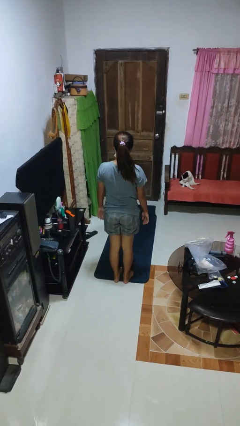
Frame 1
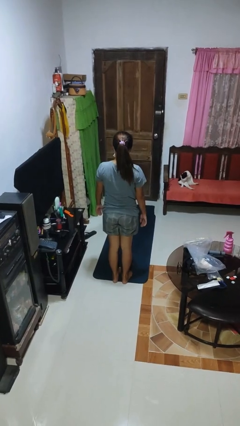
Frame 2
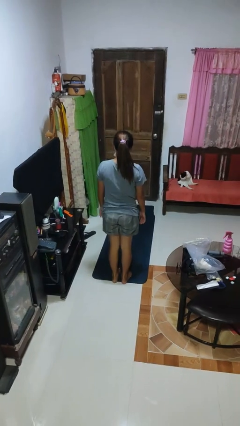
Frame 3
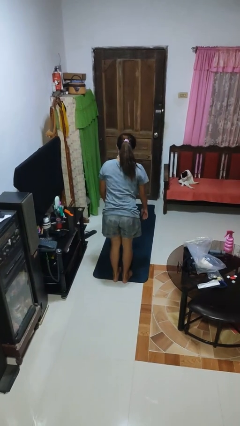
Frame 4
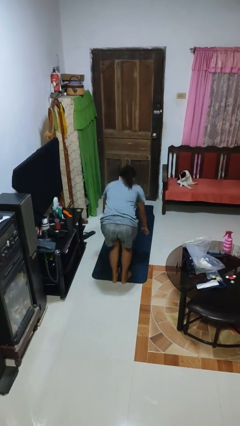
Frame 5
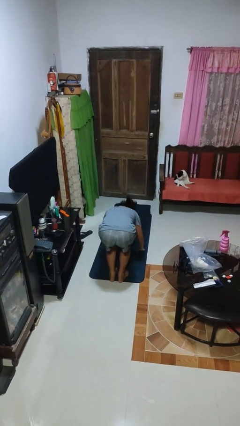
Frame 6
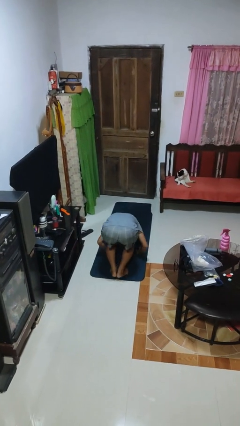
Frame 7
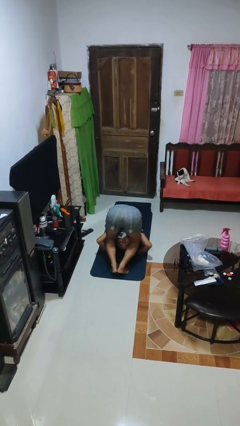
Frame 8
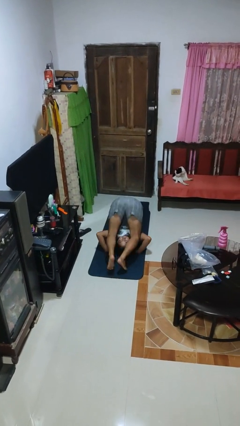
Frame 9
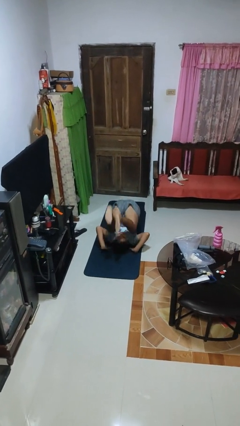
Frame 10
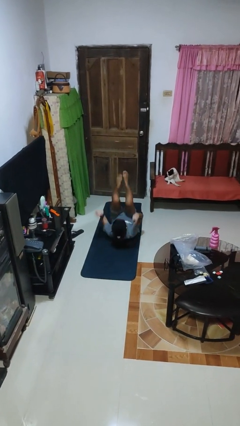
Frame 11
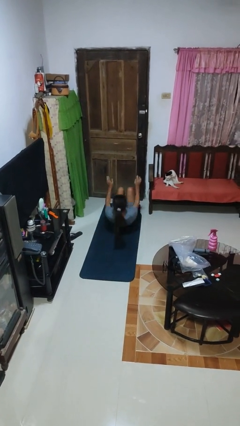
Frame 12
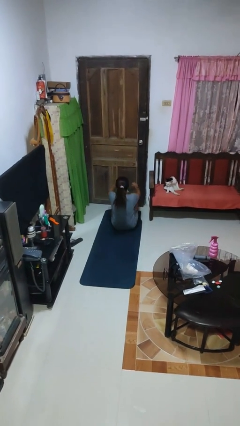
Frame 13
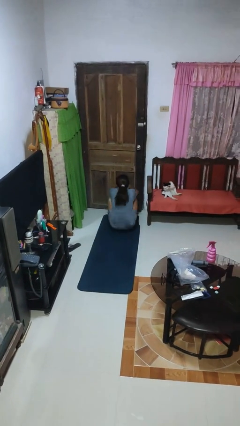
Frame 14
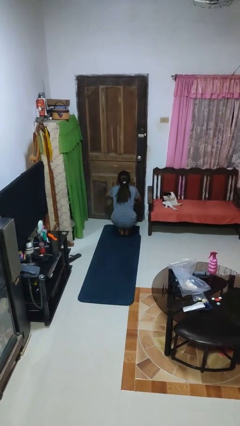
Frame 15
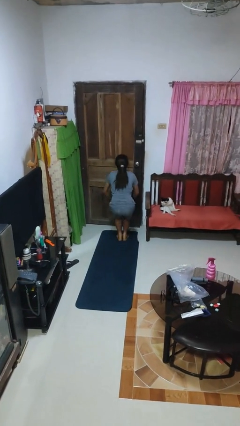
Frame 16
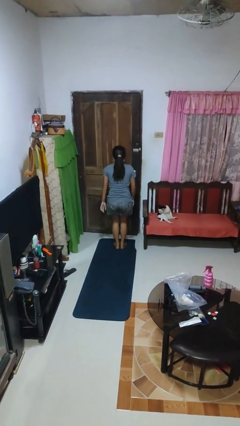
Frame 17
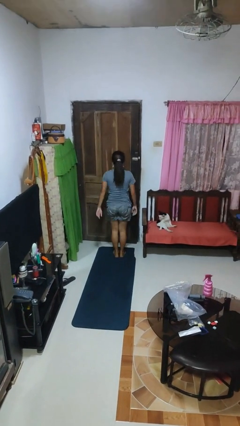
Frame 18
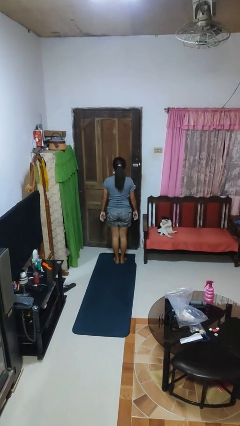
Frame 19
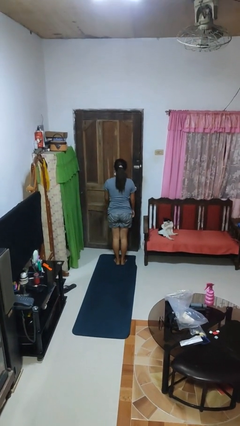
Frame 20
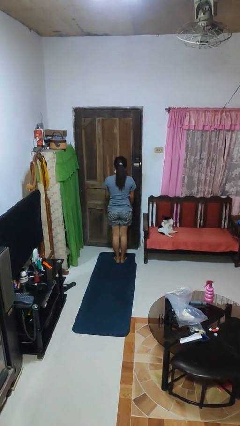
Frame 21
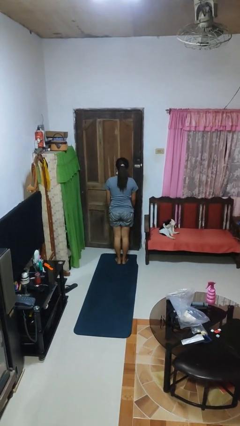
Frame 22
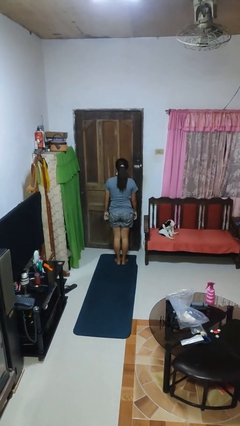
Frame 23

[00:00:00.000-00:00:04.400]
person somersaults

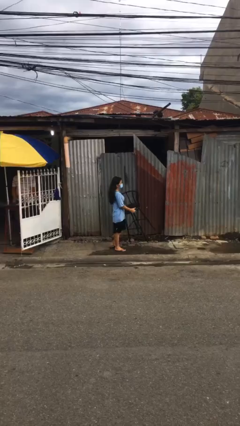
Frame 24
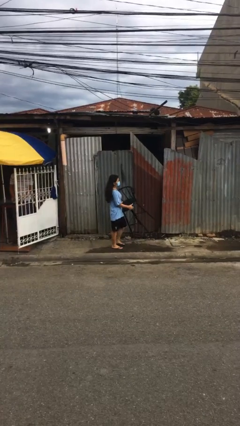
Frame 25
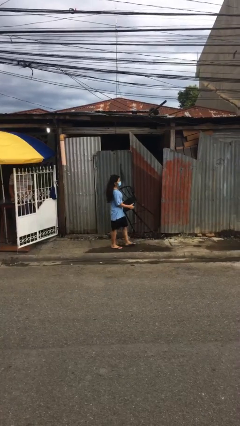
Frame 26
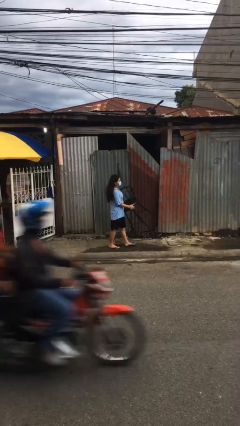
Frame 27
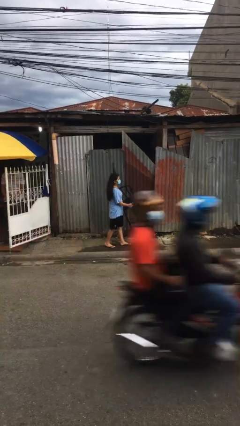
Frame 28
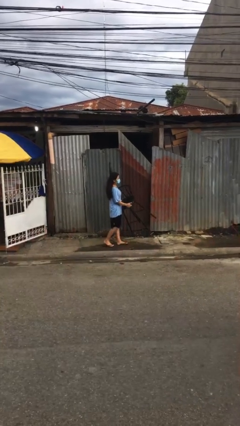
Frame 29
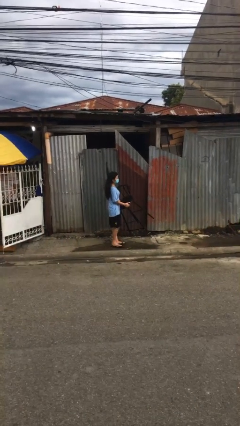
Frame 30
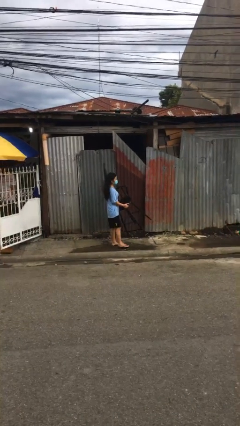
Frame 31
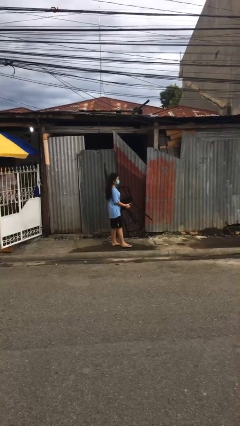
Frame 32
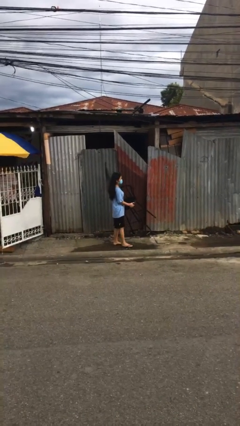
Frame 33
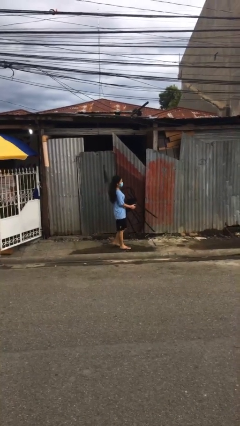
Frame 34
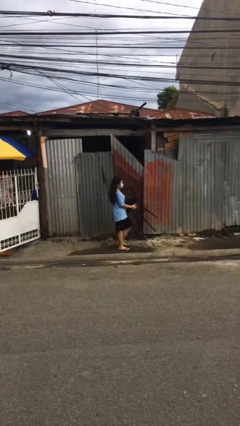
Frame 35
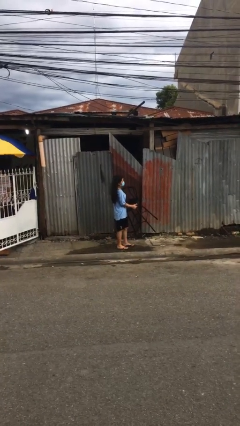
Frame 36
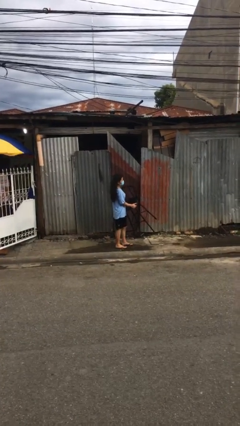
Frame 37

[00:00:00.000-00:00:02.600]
person carries heavy object

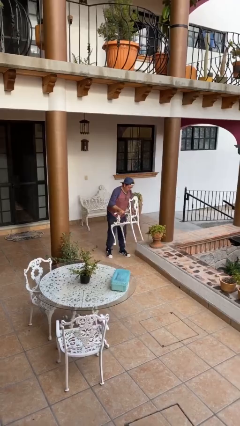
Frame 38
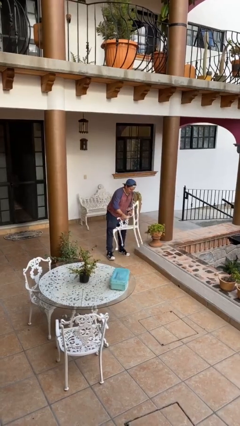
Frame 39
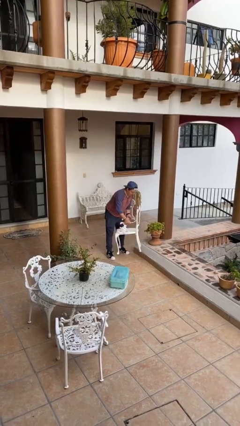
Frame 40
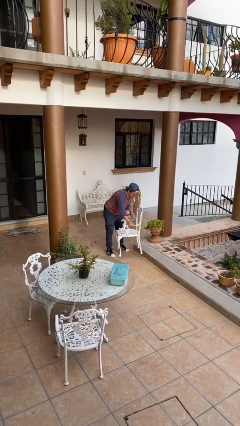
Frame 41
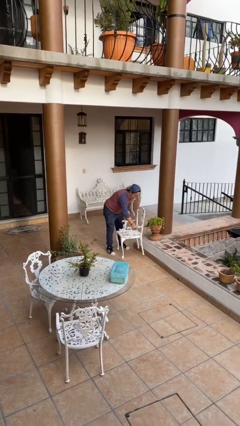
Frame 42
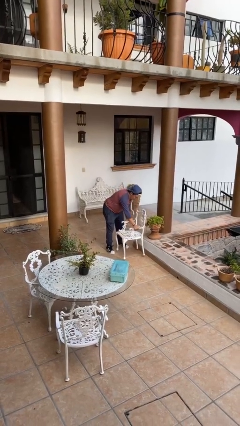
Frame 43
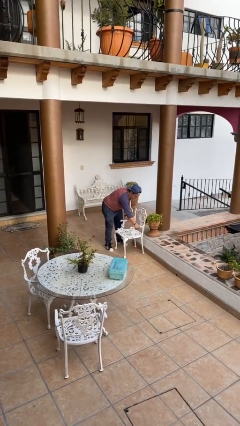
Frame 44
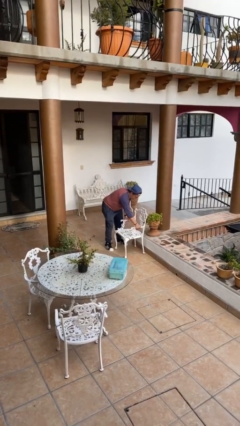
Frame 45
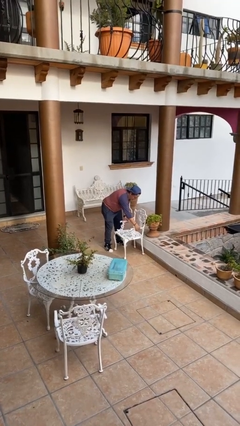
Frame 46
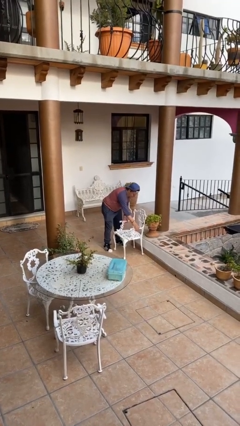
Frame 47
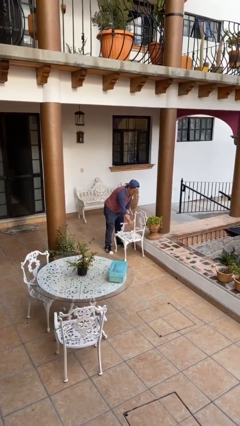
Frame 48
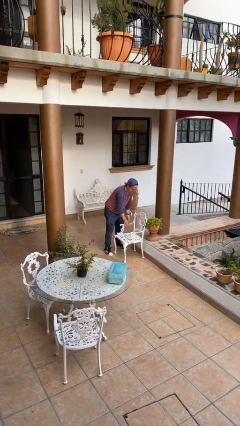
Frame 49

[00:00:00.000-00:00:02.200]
person puts down object on floor

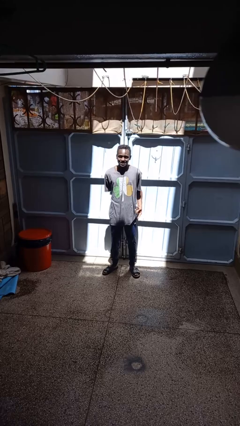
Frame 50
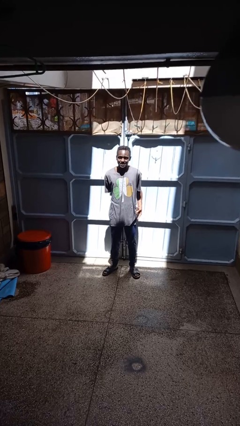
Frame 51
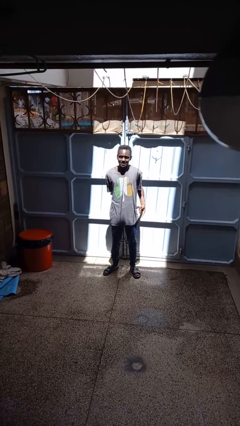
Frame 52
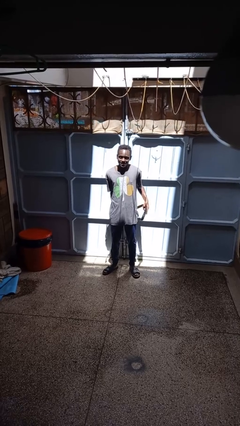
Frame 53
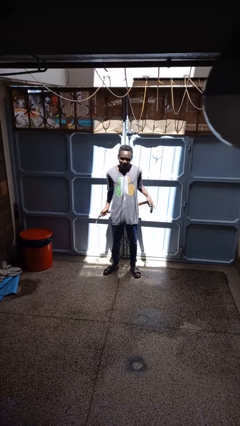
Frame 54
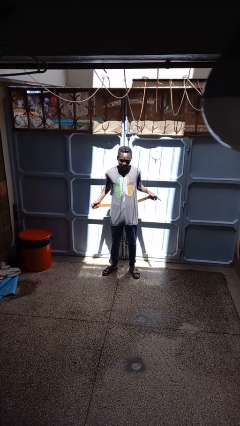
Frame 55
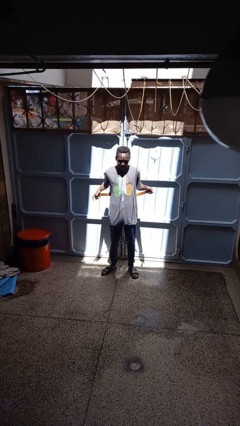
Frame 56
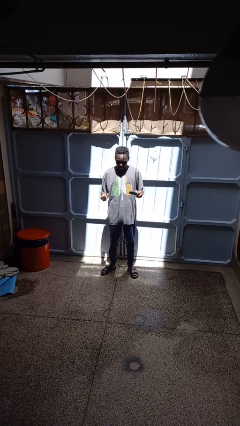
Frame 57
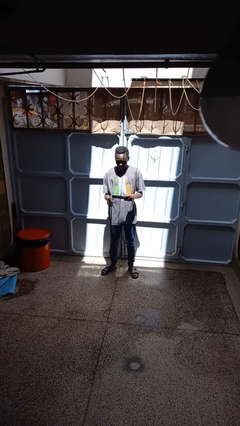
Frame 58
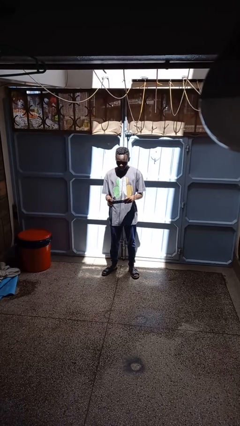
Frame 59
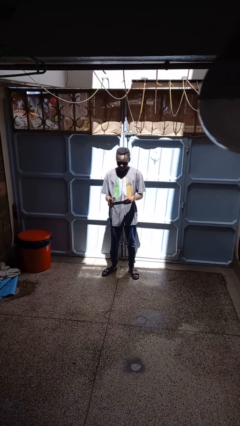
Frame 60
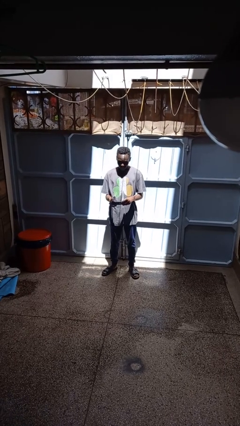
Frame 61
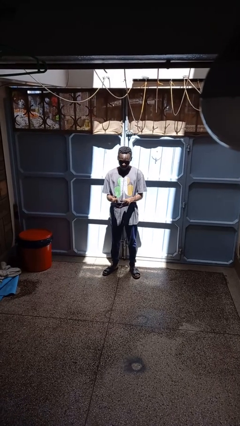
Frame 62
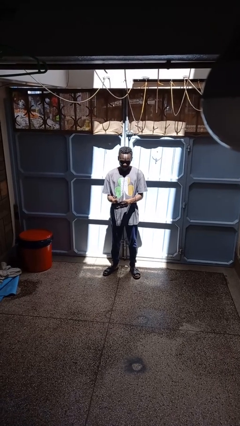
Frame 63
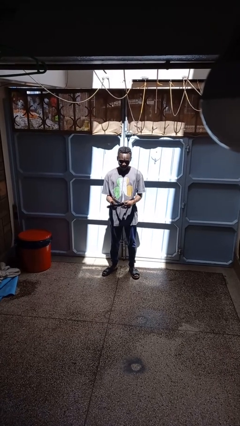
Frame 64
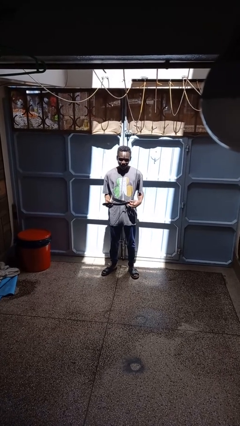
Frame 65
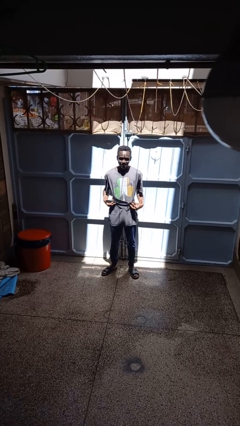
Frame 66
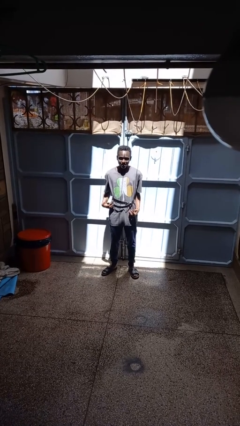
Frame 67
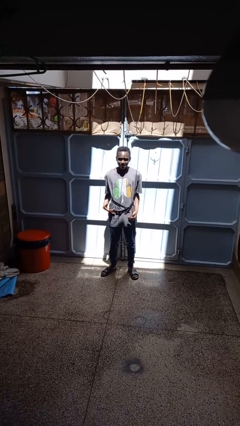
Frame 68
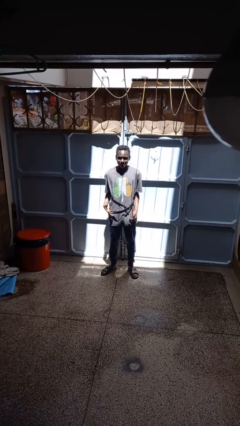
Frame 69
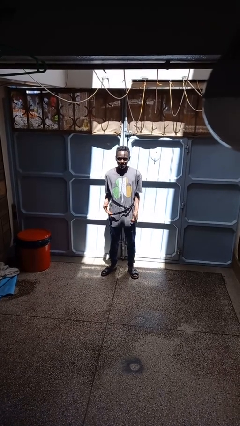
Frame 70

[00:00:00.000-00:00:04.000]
person puts on belt

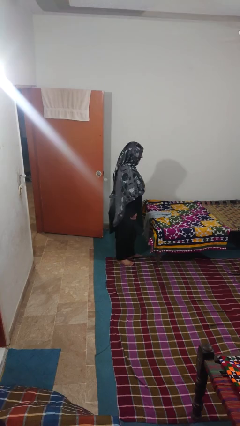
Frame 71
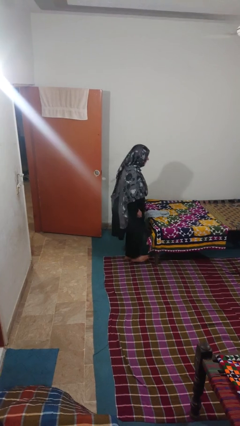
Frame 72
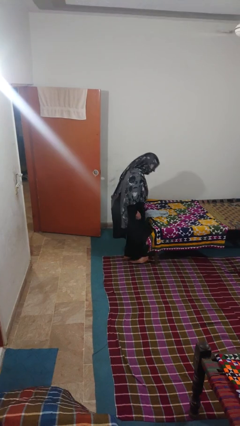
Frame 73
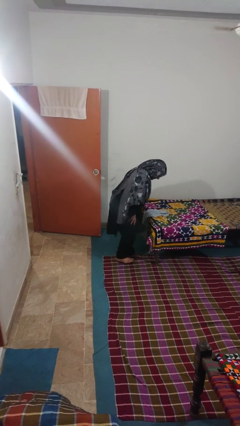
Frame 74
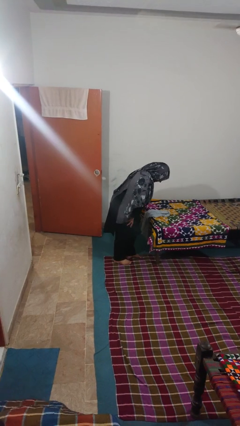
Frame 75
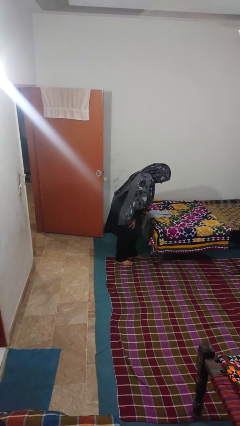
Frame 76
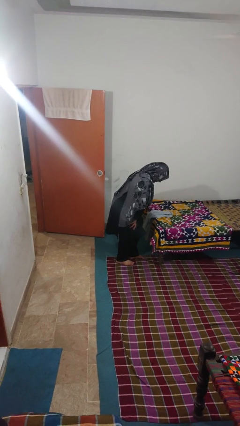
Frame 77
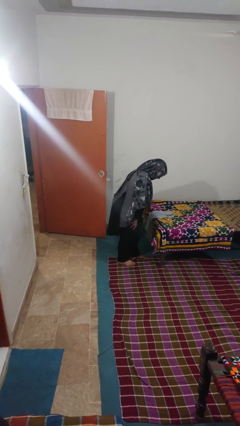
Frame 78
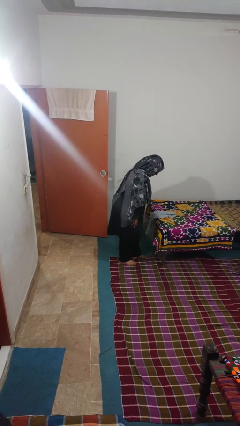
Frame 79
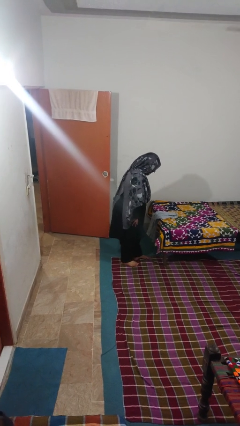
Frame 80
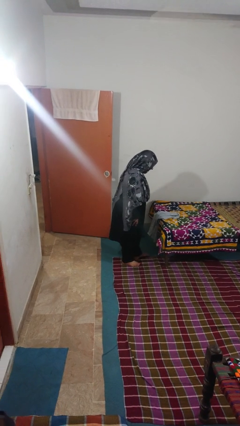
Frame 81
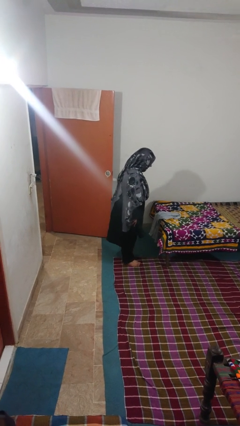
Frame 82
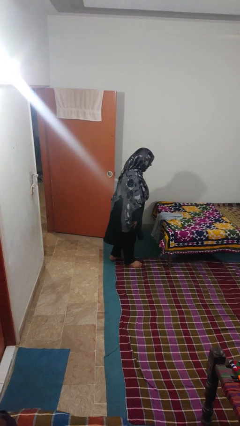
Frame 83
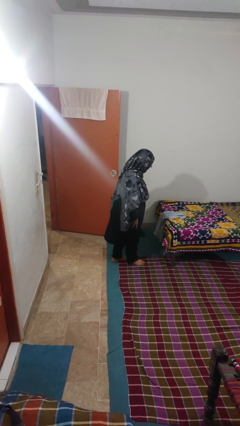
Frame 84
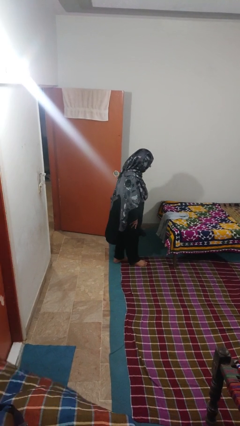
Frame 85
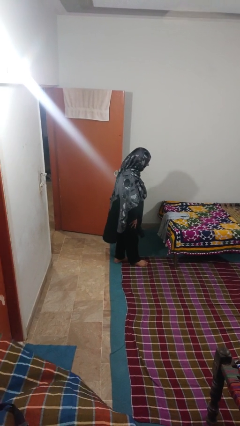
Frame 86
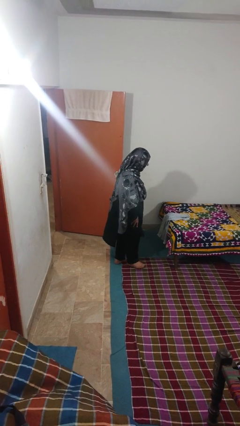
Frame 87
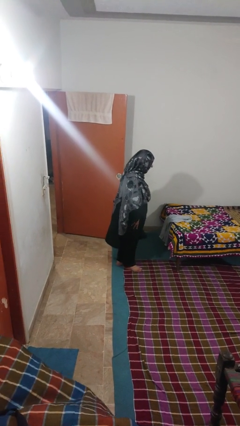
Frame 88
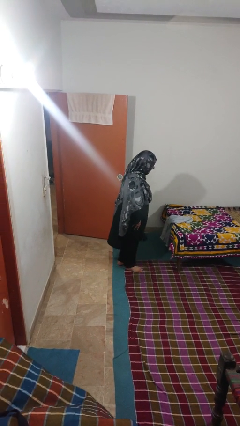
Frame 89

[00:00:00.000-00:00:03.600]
person stubs toe

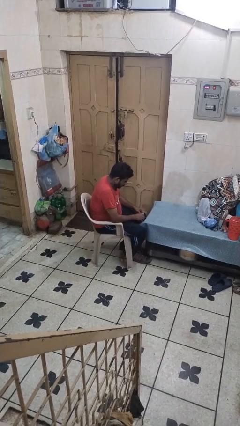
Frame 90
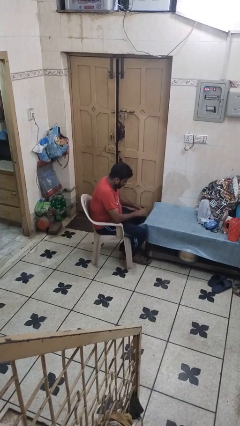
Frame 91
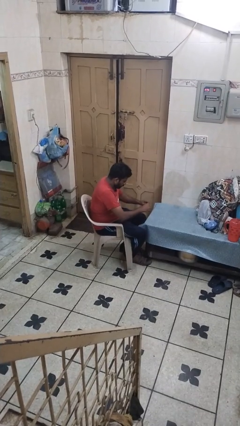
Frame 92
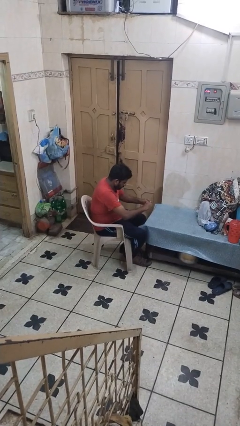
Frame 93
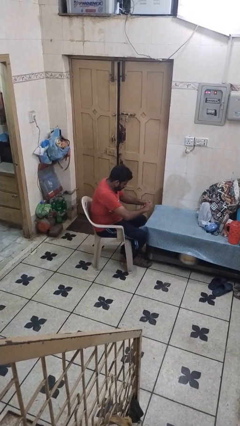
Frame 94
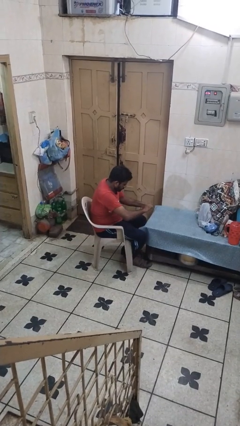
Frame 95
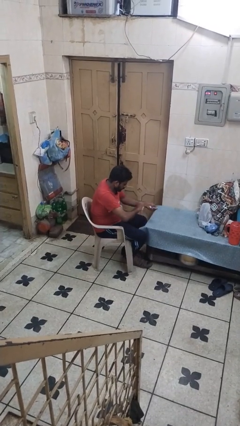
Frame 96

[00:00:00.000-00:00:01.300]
person tears paper
